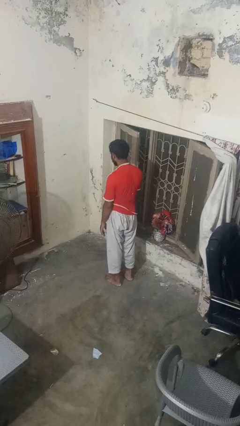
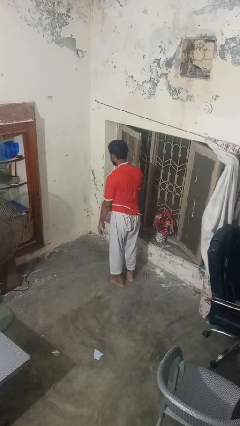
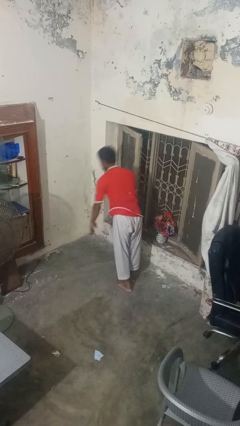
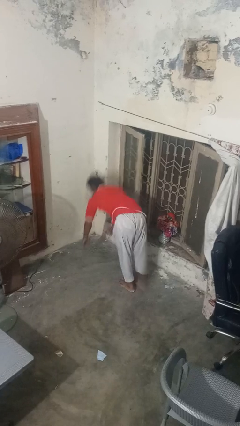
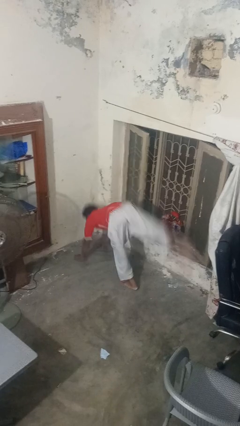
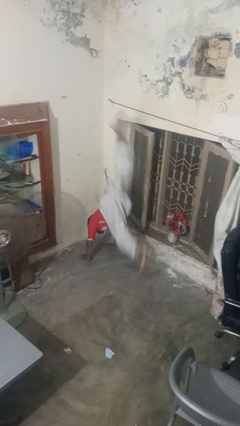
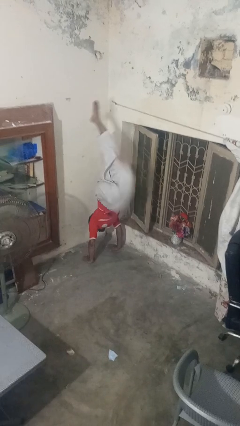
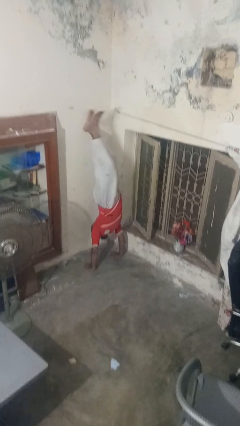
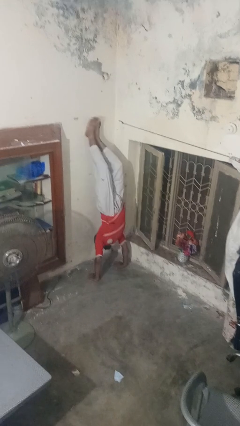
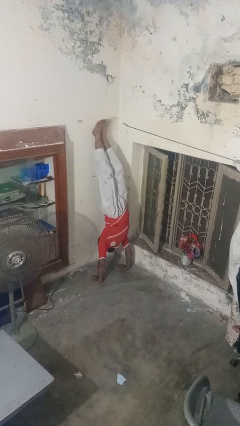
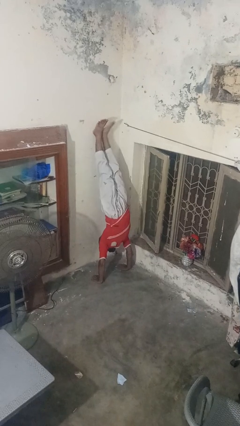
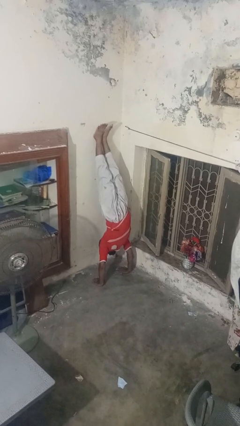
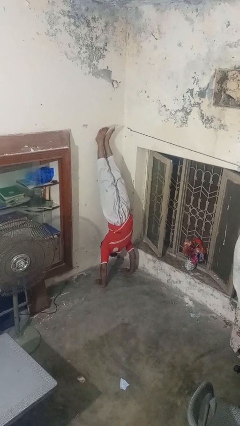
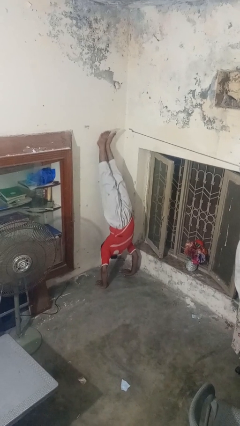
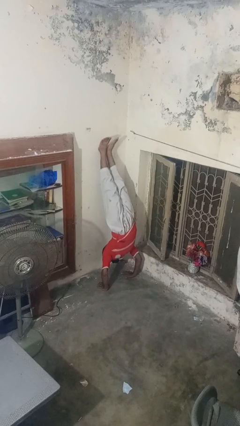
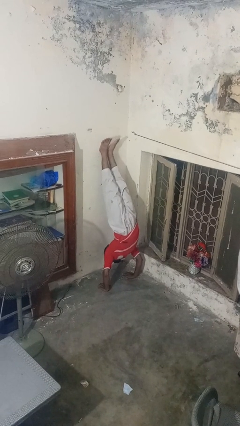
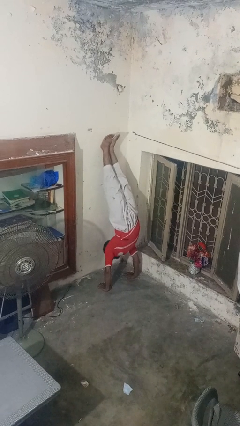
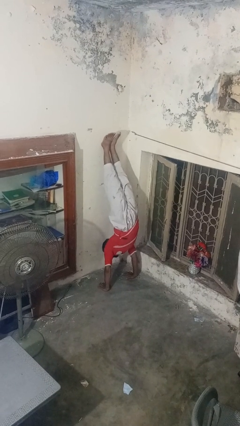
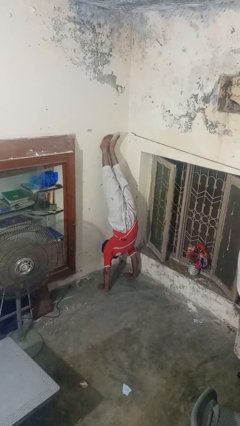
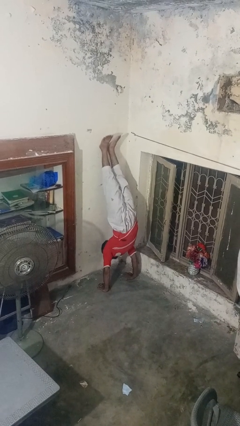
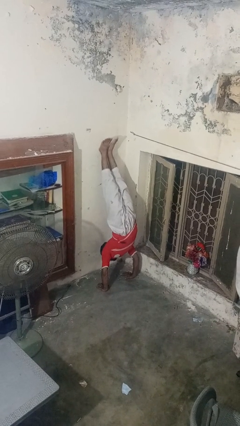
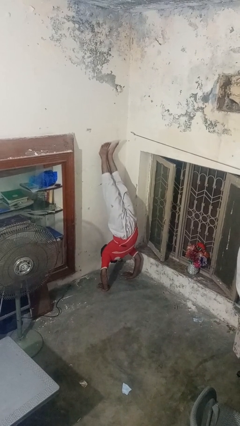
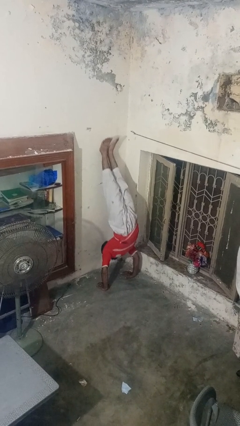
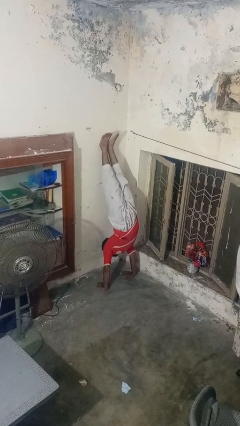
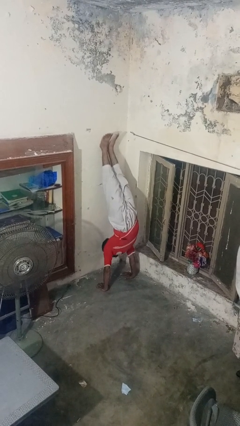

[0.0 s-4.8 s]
person handstand

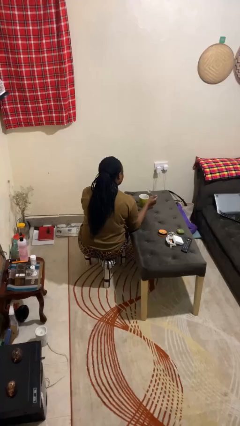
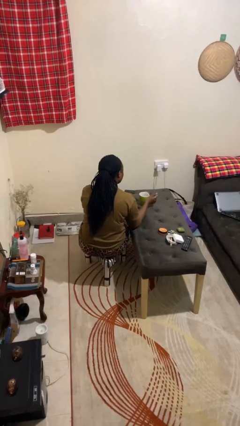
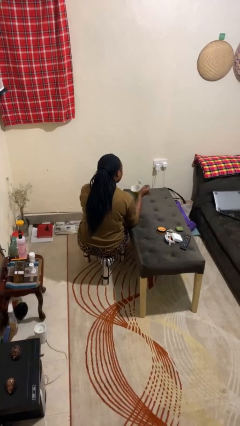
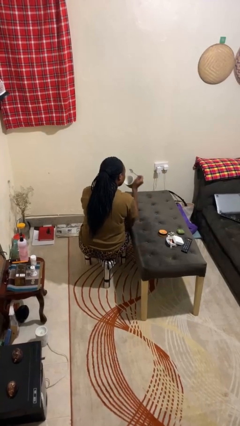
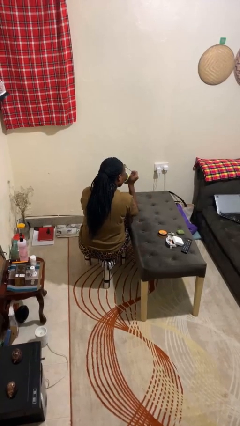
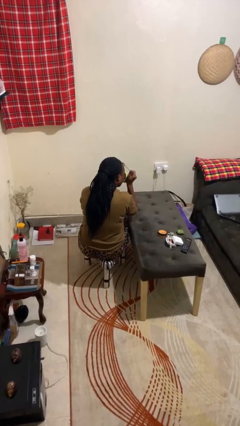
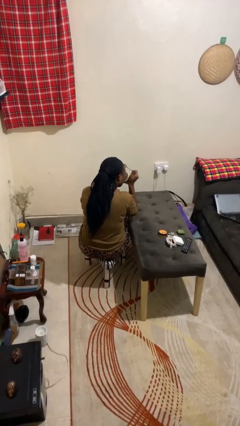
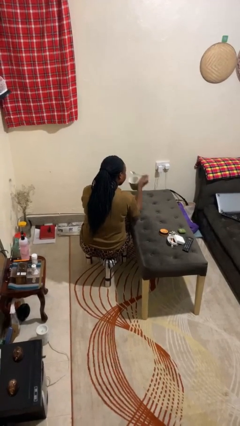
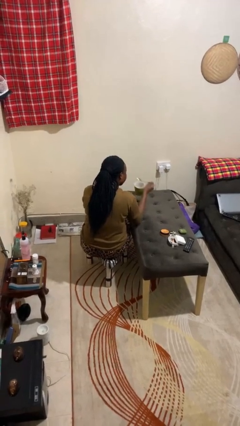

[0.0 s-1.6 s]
person drinks from mug

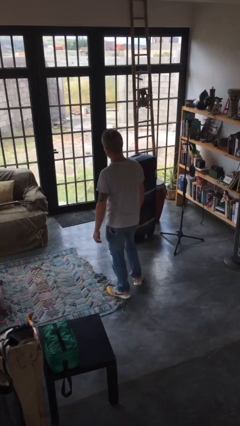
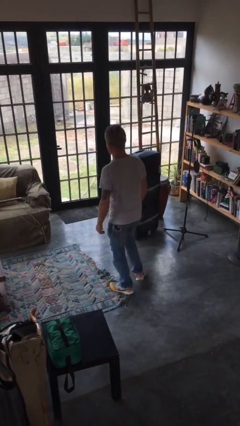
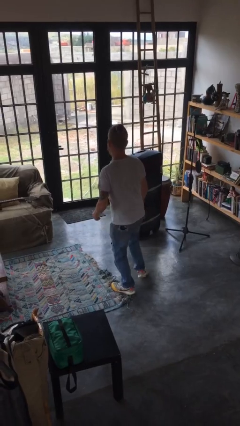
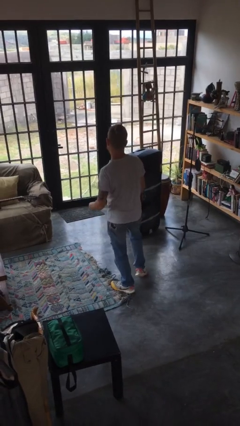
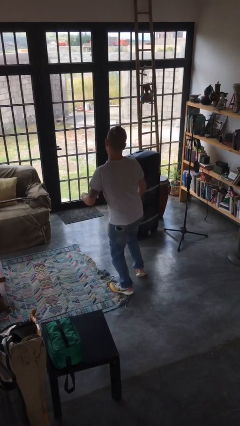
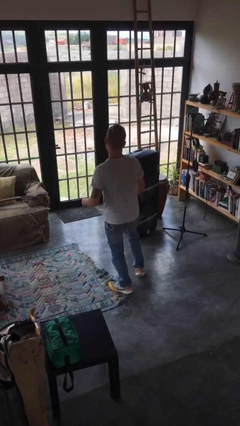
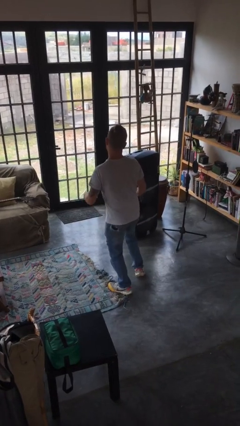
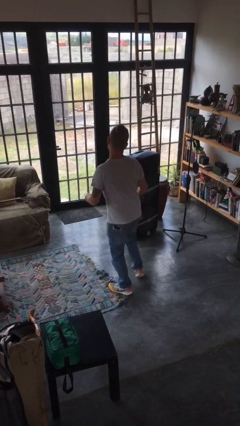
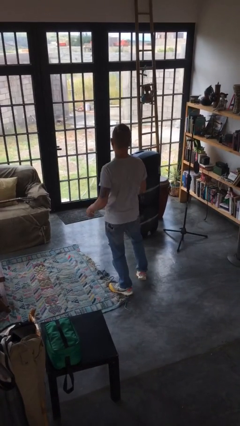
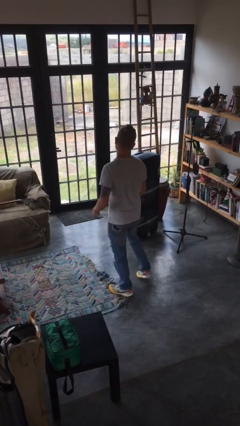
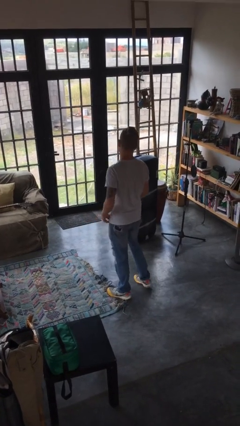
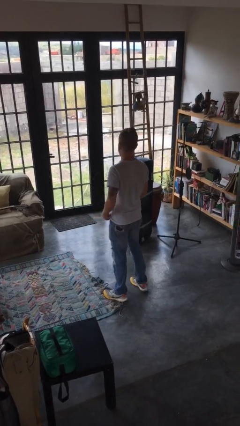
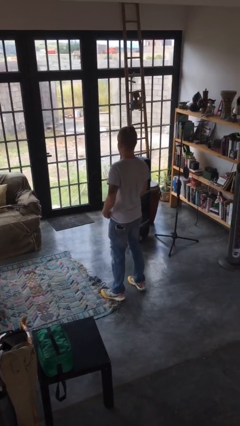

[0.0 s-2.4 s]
person wiggles hips

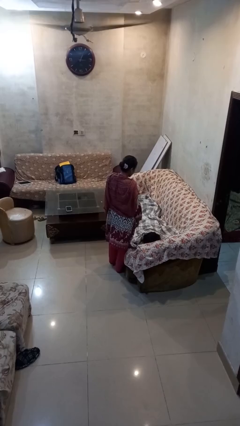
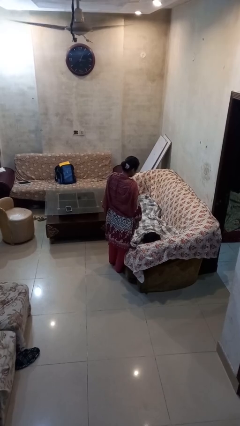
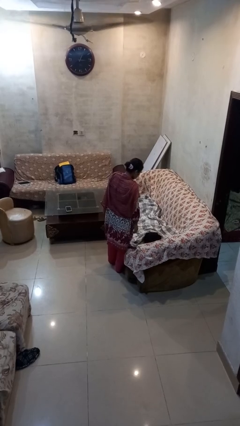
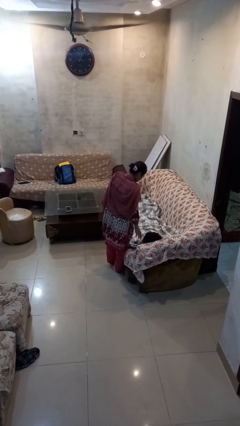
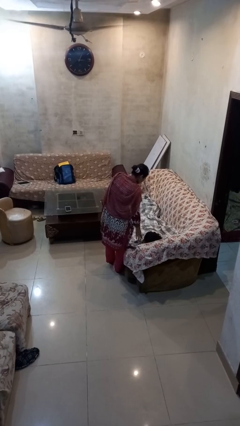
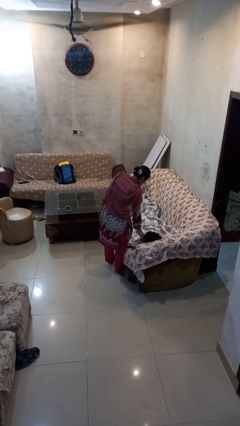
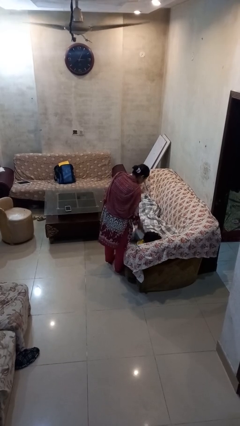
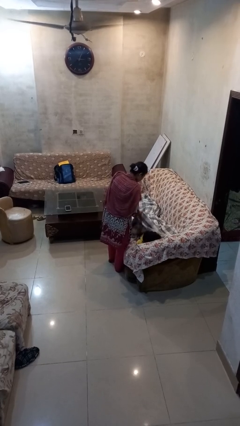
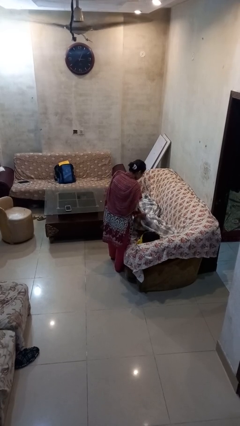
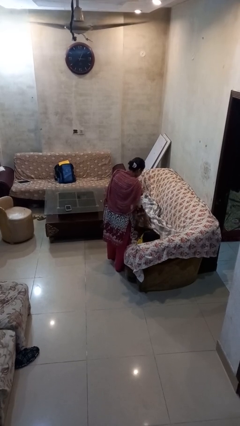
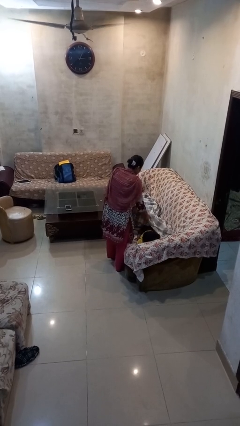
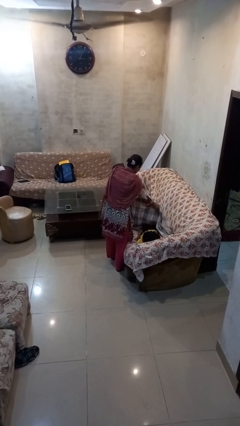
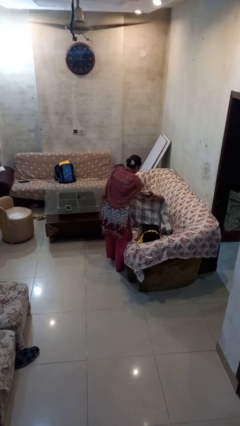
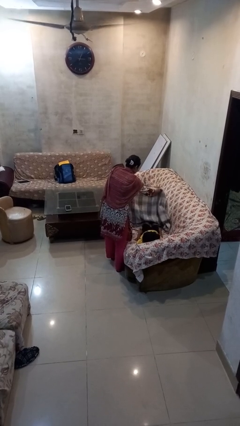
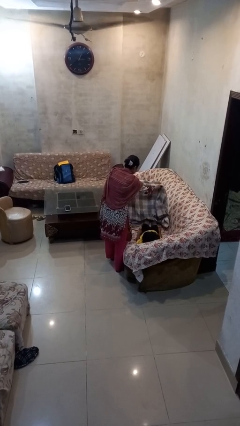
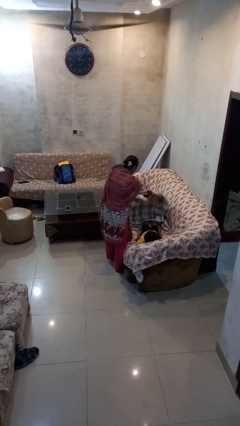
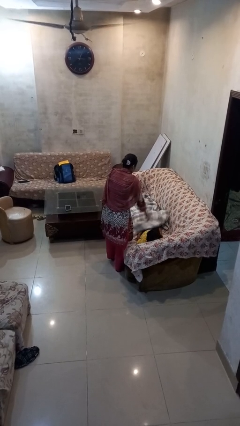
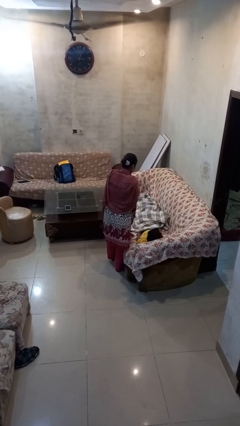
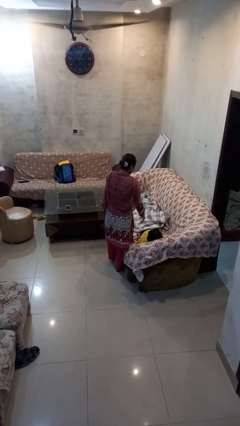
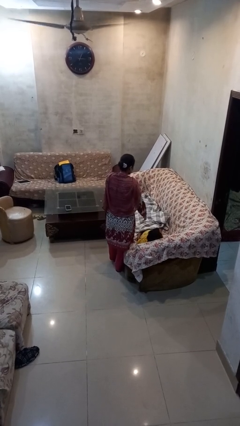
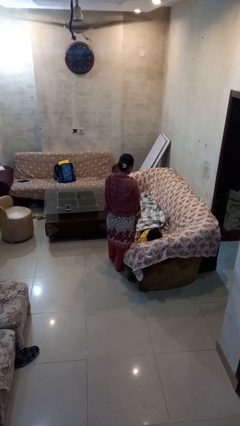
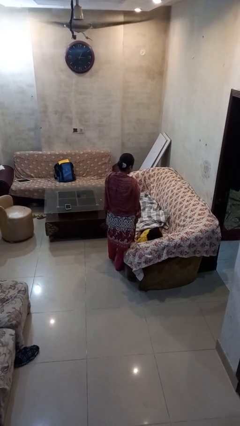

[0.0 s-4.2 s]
person uncovers friend with blanket

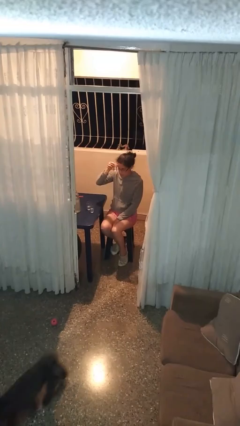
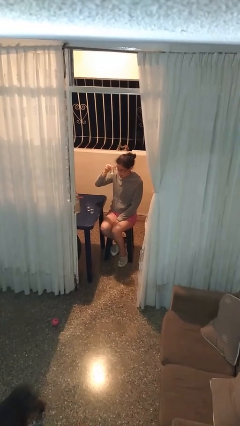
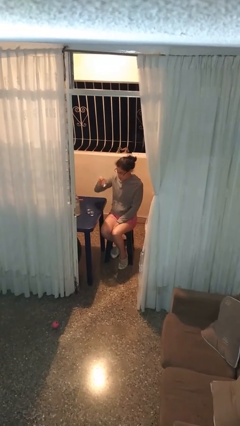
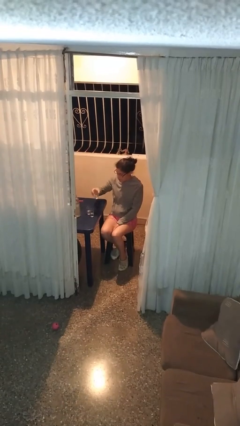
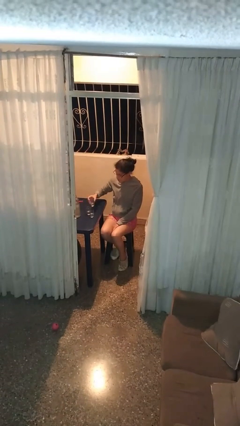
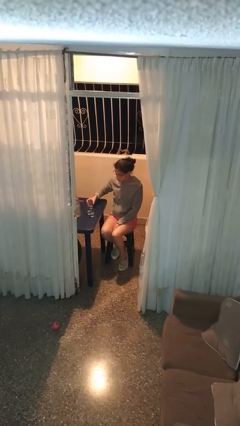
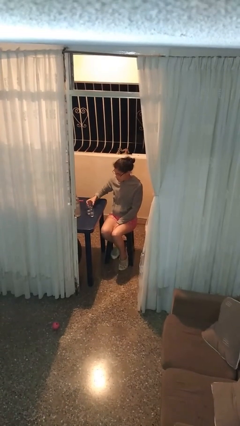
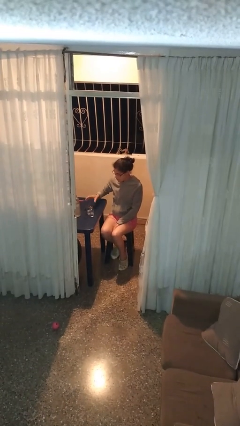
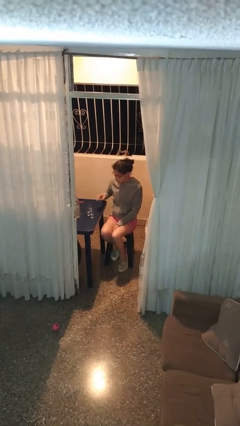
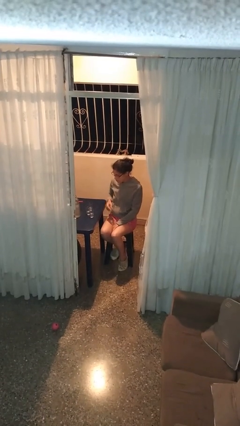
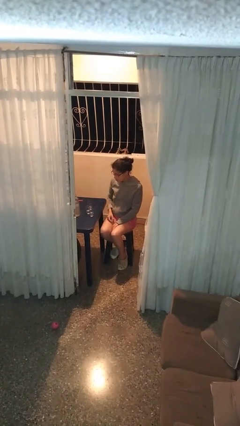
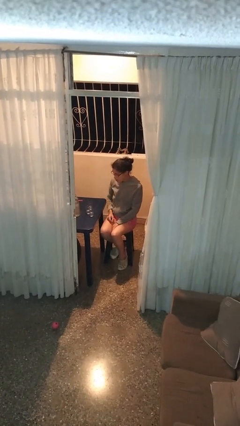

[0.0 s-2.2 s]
person puts down object on table

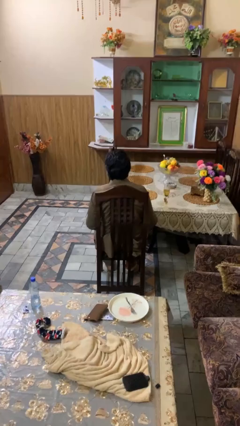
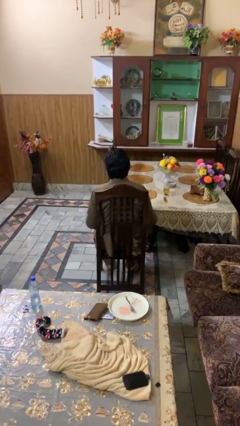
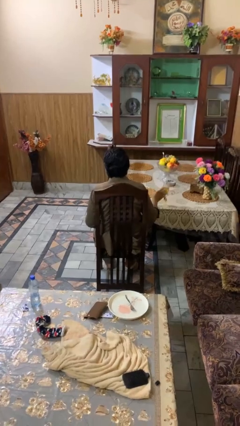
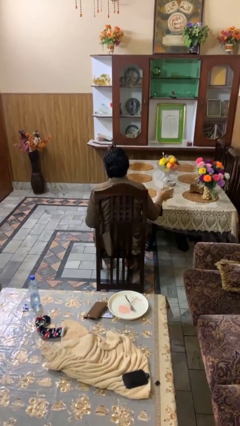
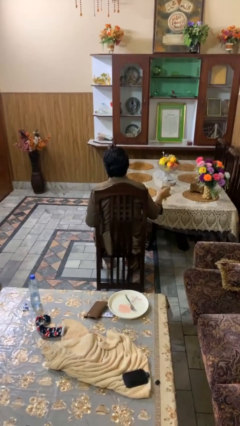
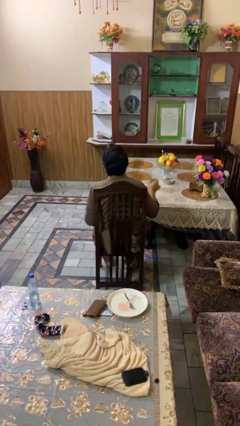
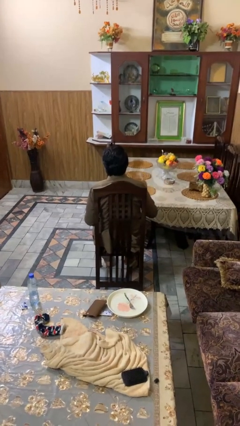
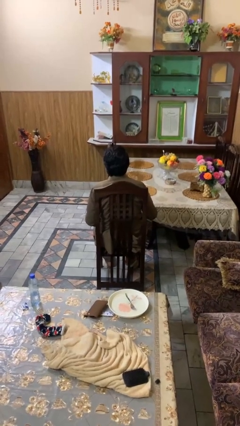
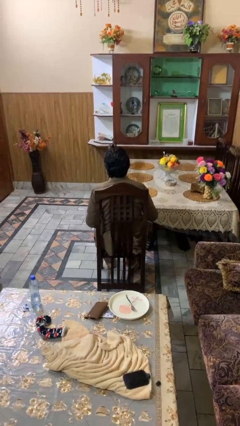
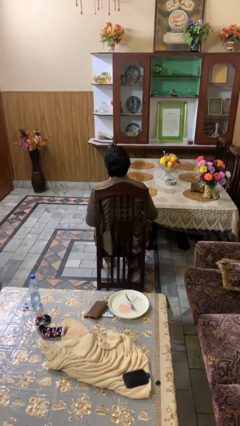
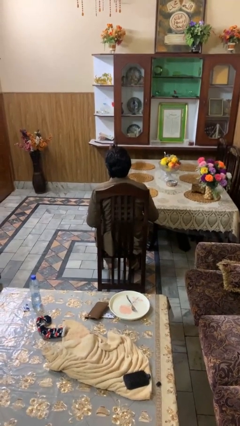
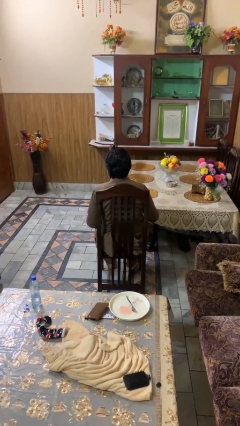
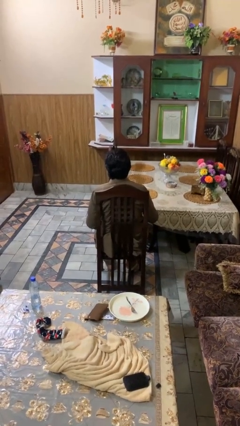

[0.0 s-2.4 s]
person picks up object from table
